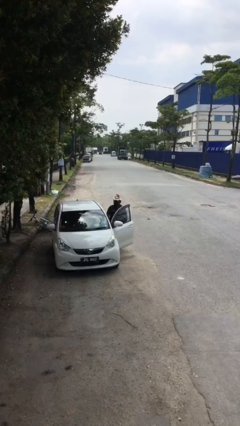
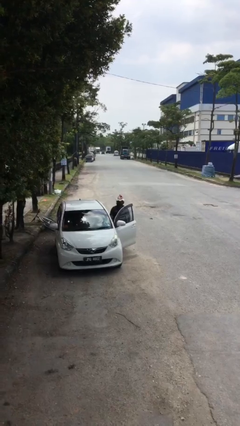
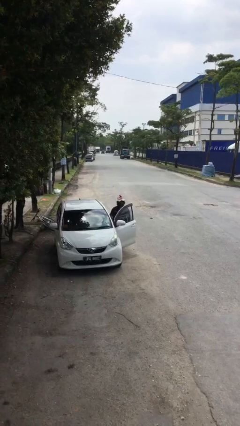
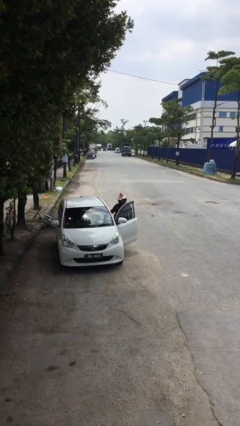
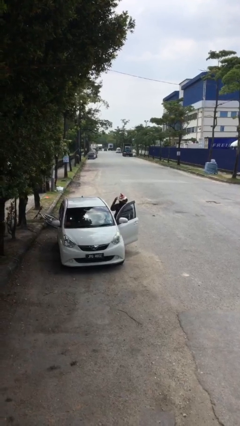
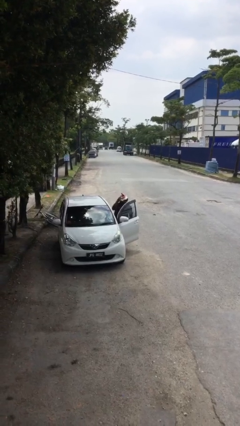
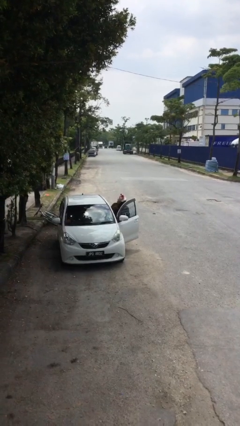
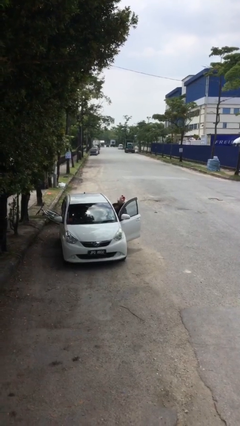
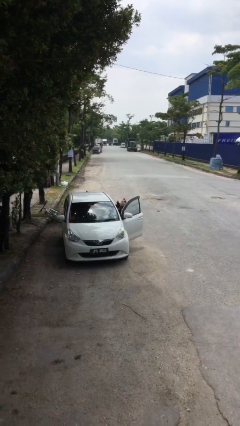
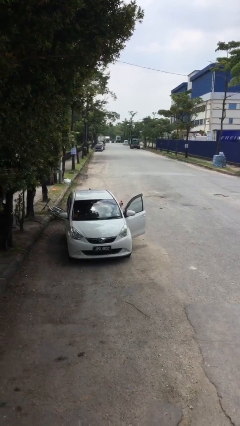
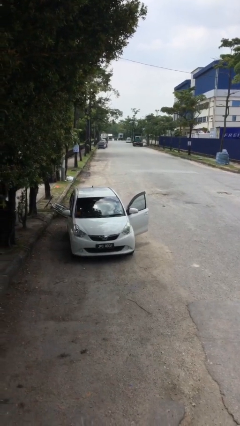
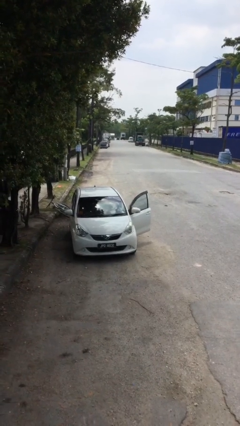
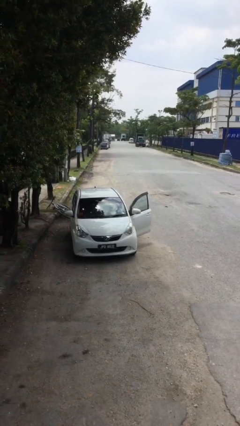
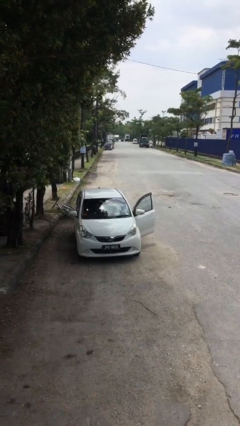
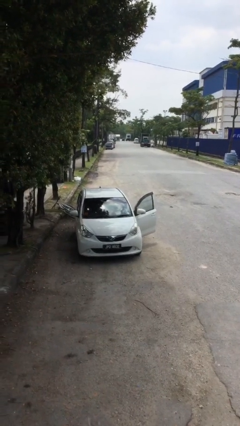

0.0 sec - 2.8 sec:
person enters car

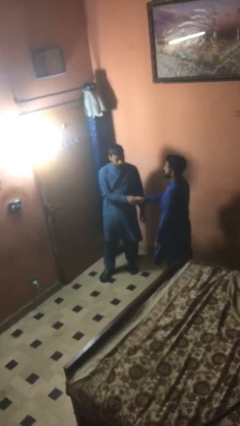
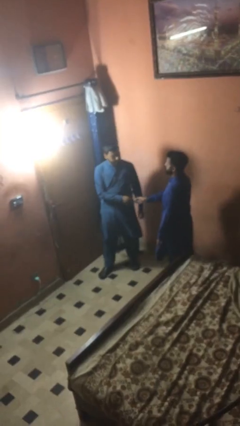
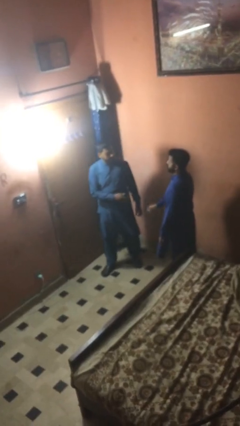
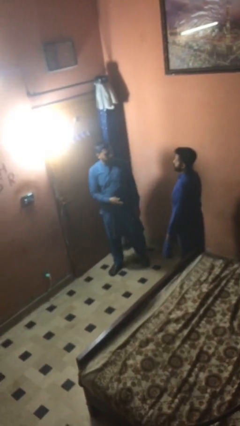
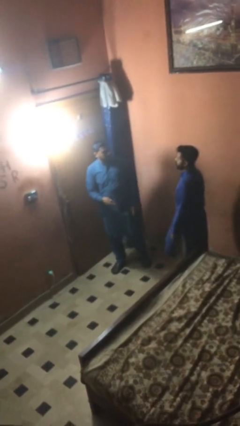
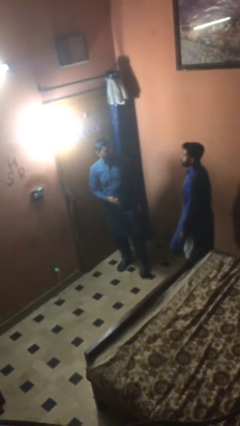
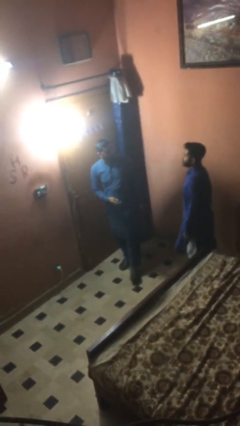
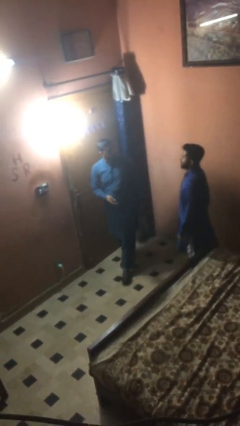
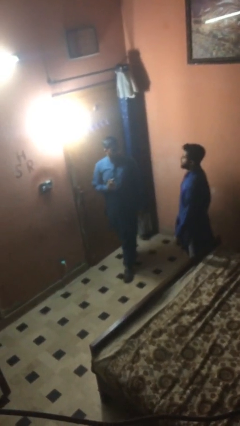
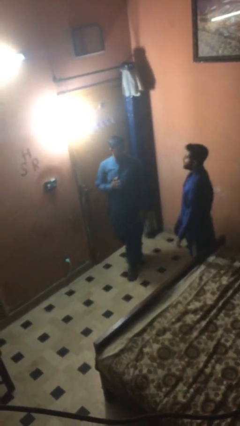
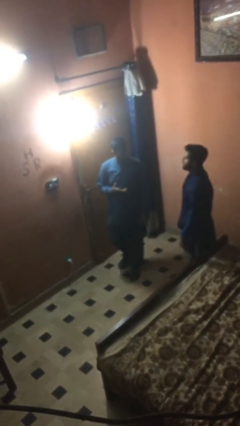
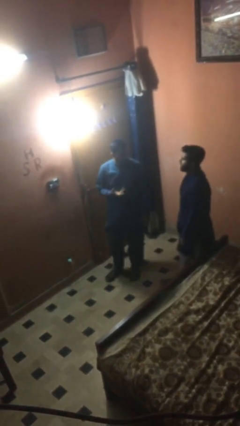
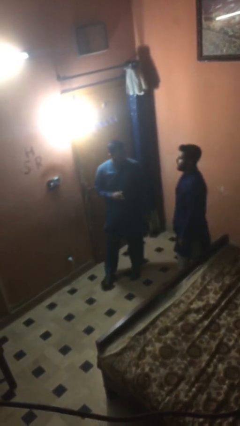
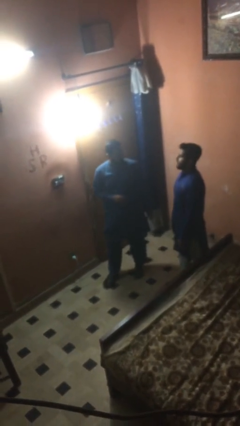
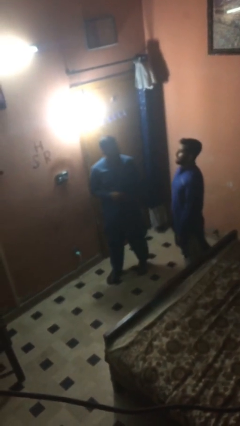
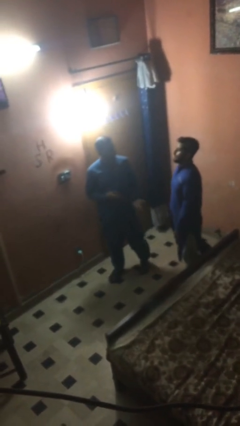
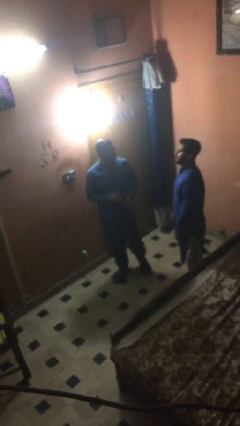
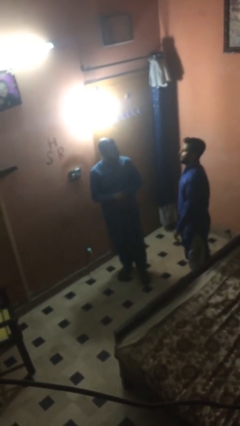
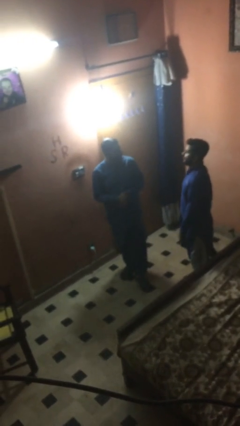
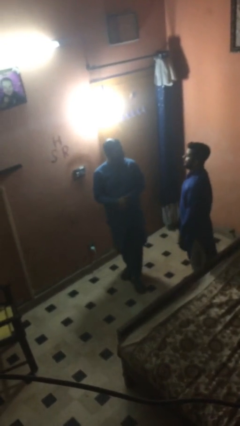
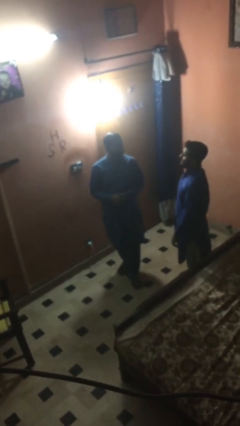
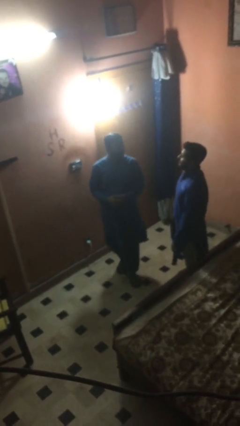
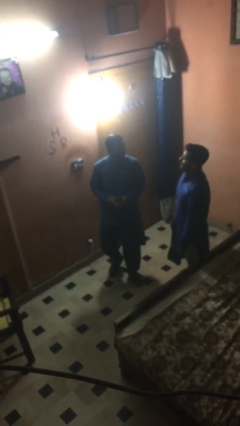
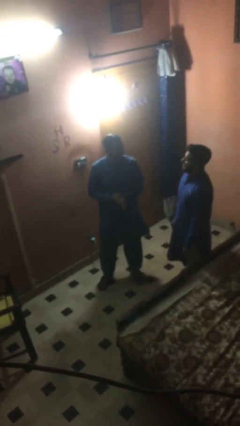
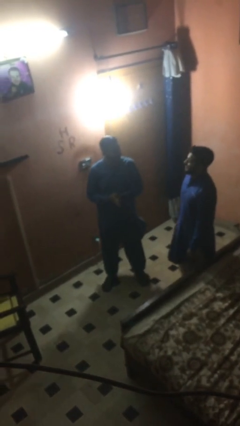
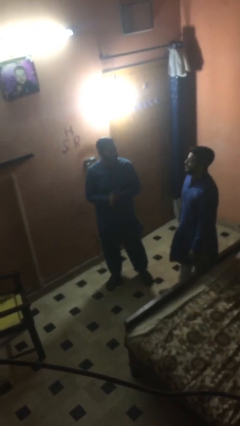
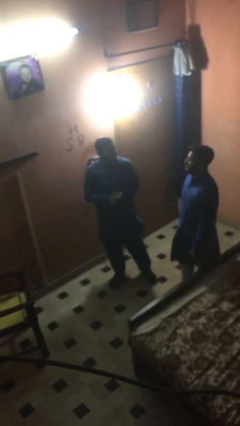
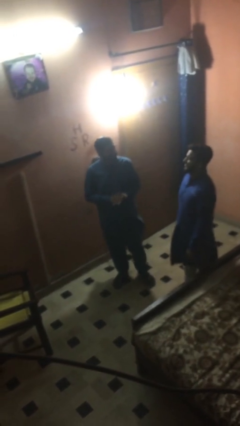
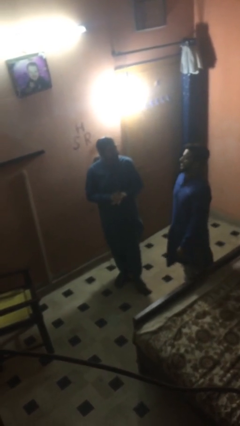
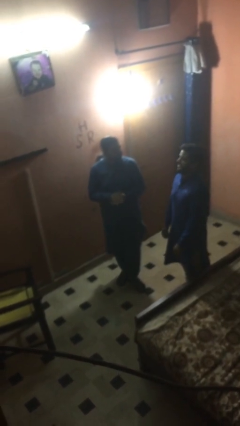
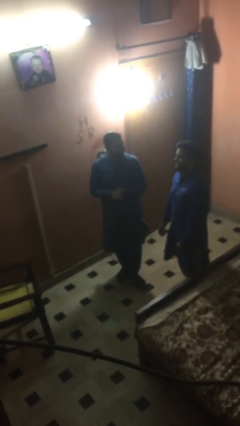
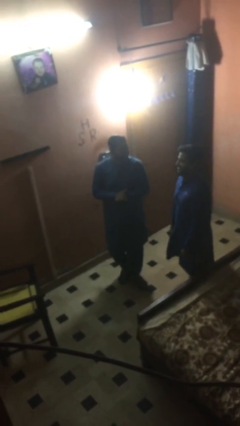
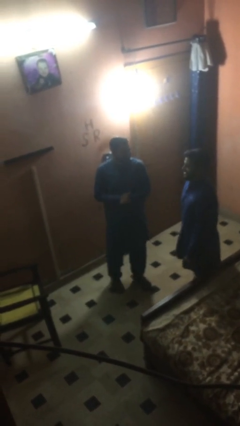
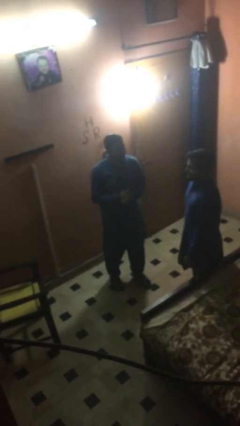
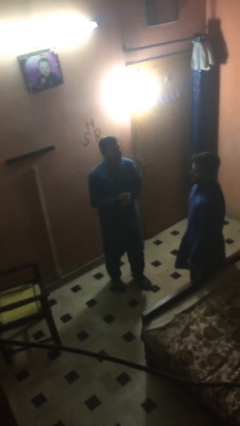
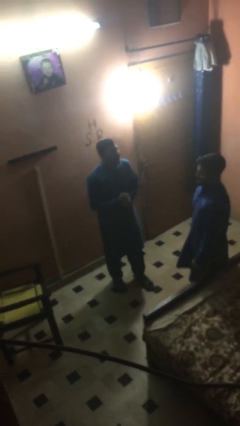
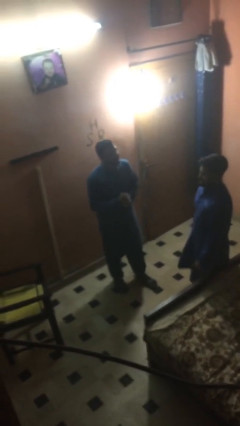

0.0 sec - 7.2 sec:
person talks to person

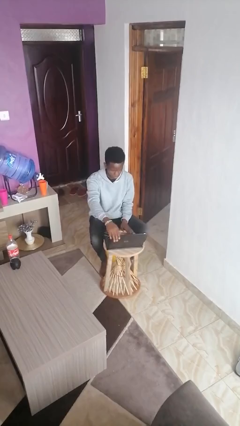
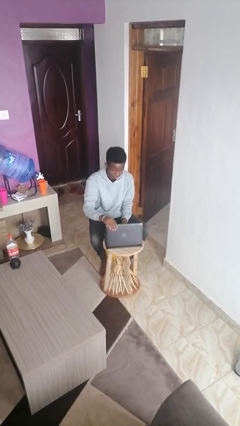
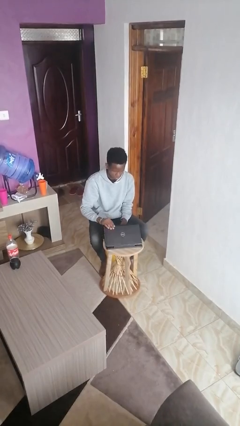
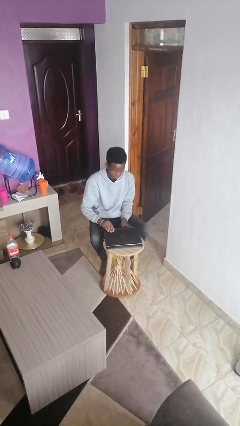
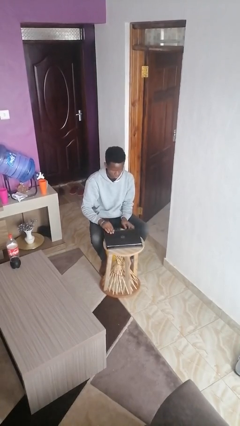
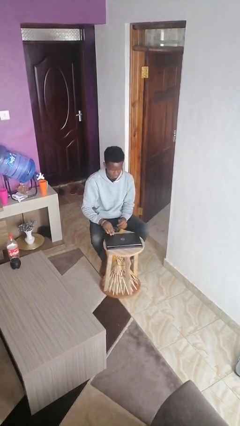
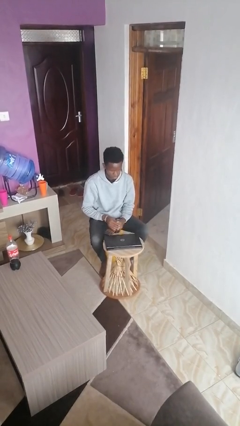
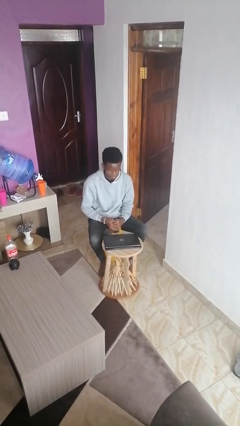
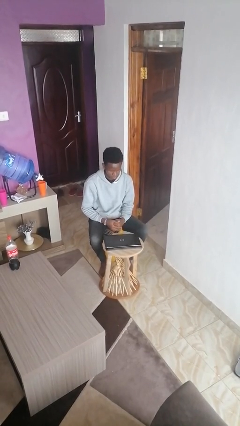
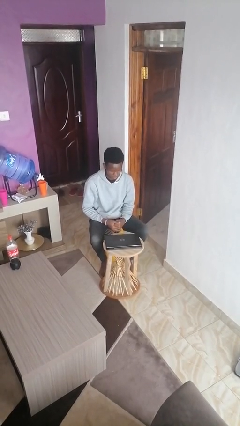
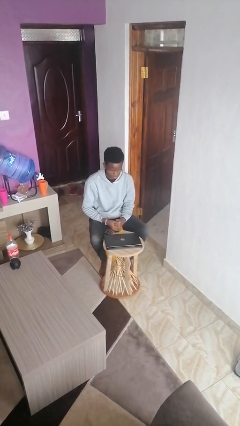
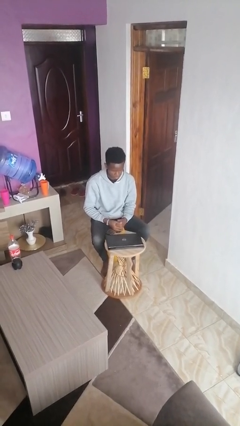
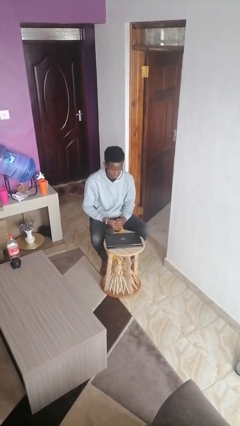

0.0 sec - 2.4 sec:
person closes laptop

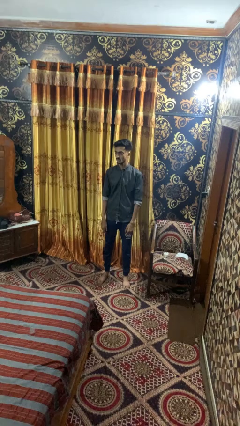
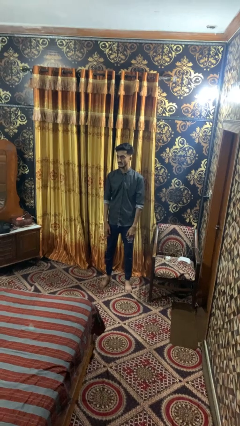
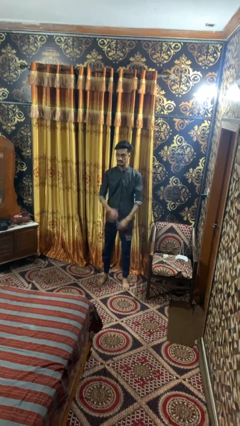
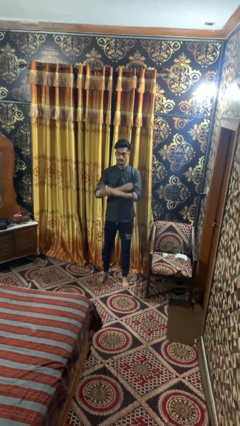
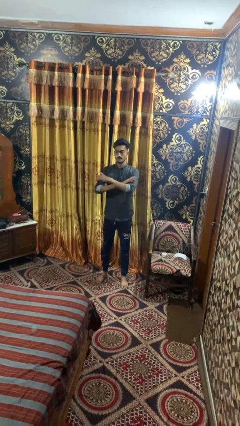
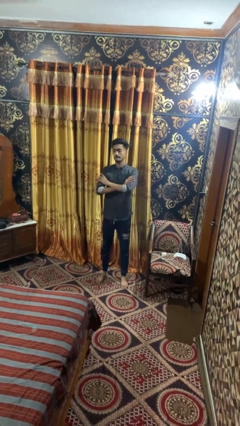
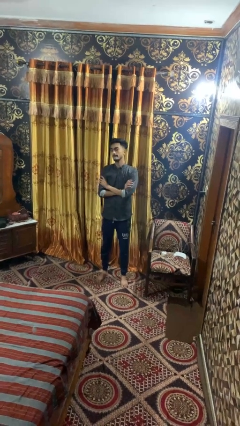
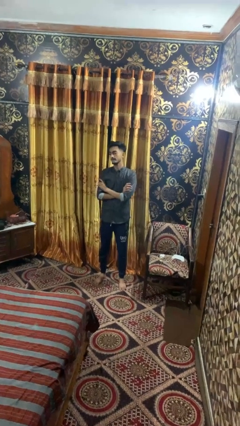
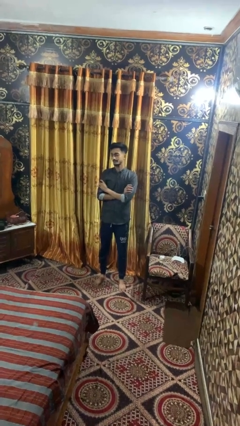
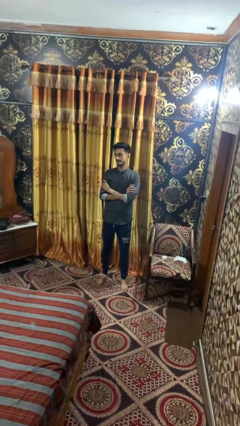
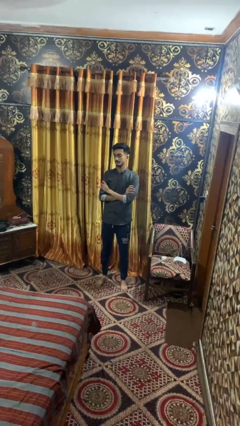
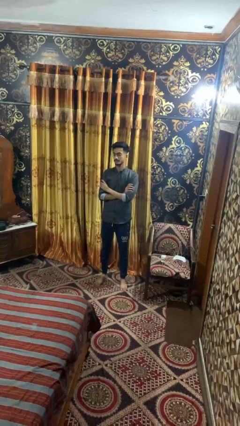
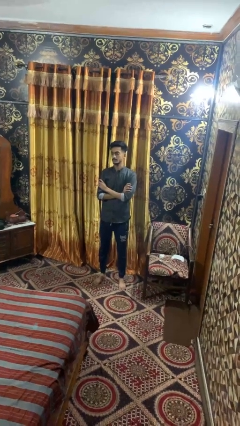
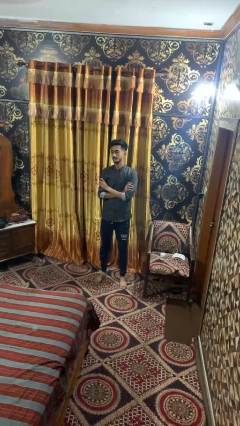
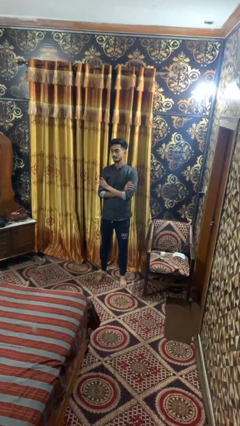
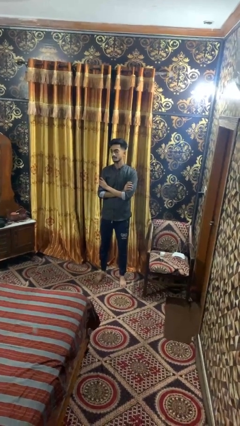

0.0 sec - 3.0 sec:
person crosses arms

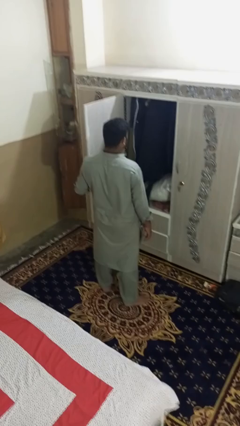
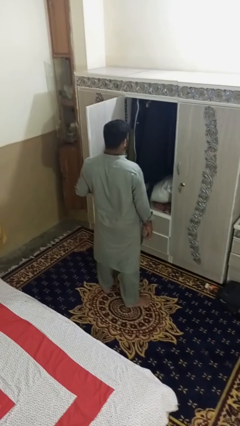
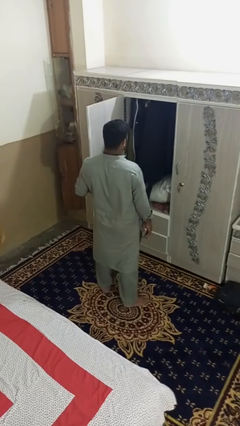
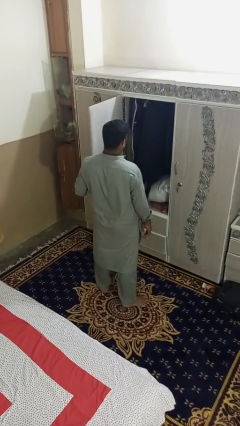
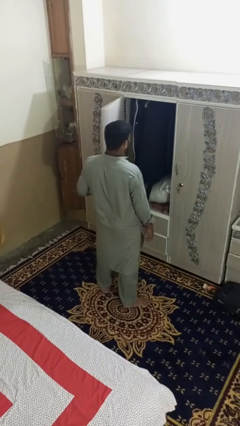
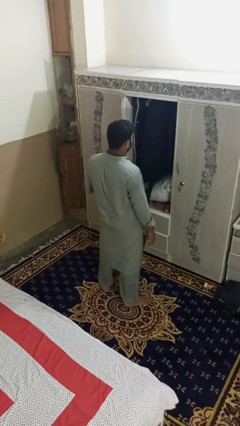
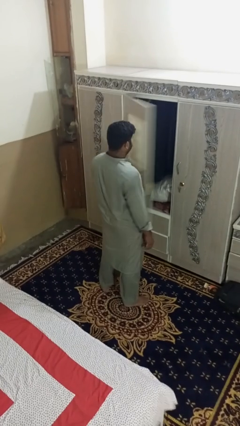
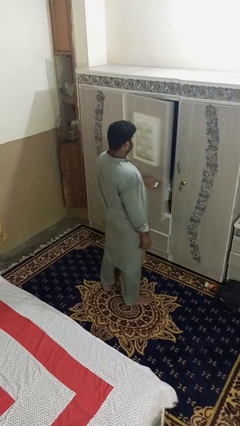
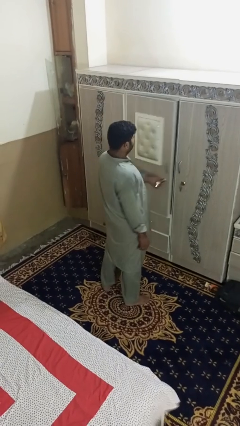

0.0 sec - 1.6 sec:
person closes dresser drawer

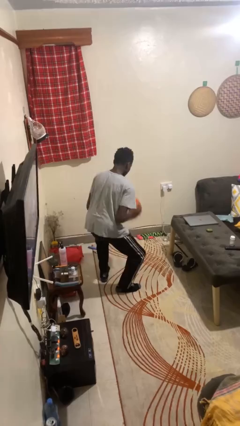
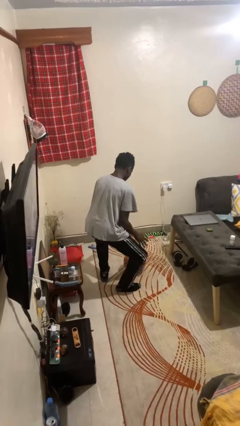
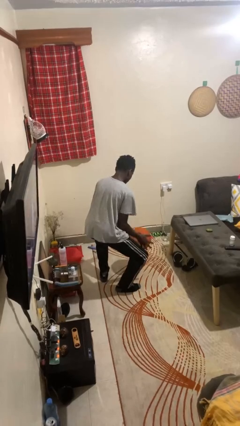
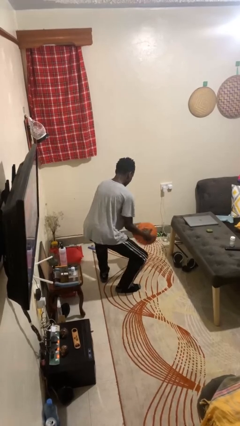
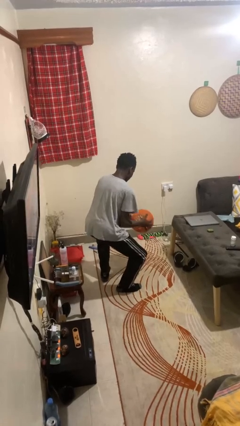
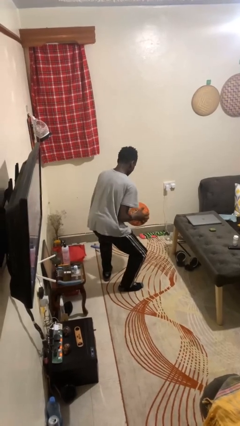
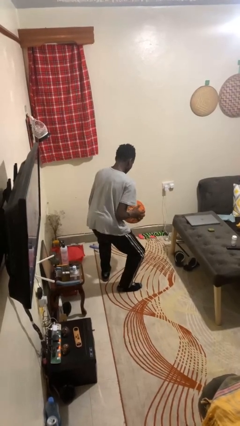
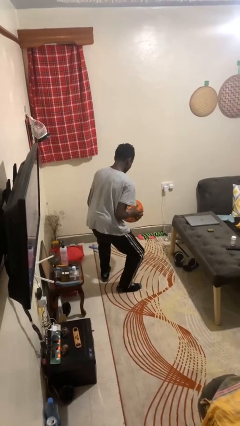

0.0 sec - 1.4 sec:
person bounces ball on floor
